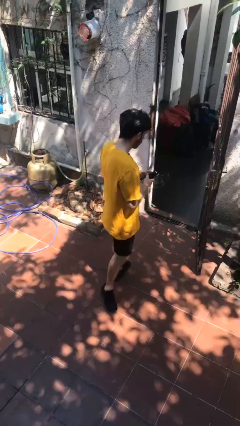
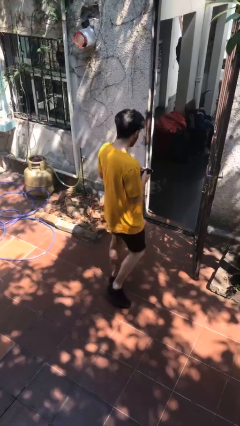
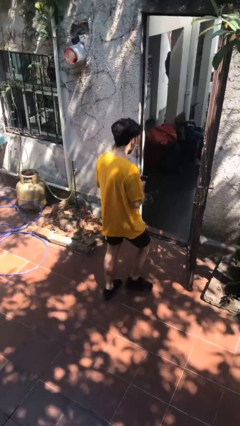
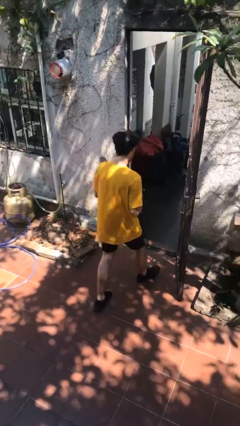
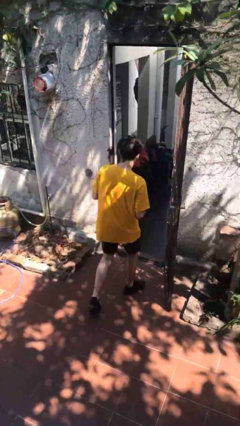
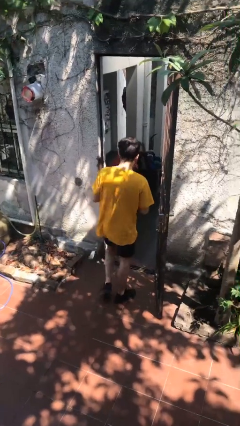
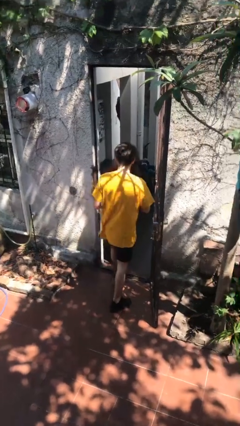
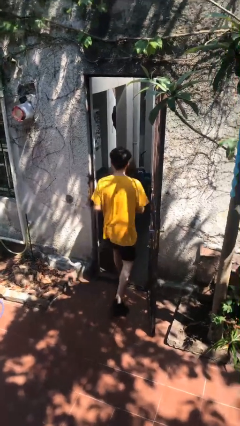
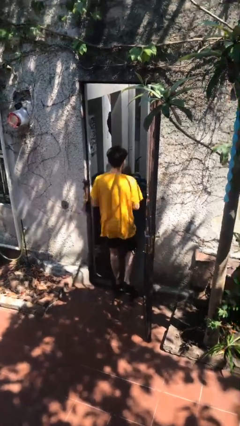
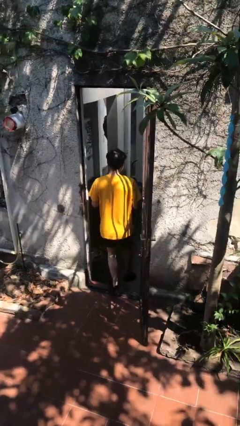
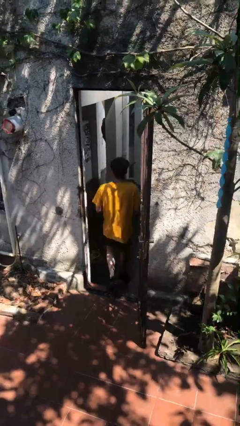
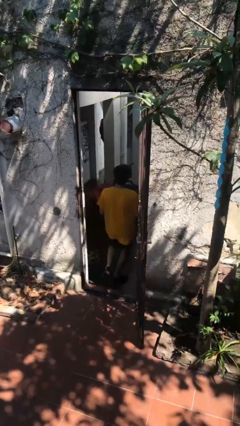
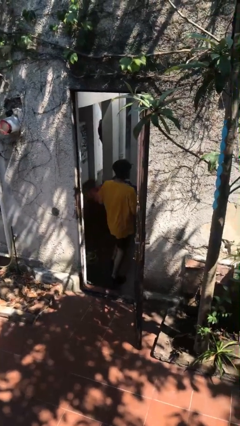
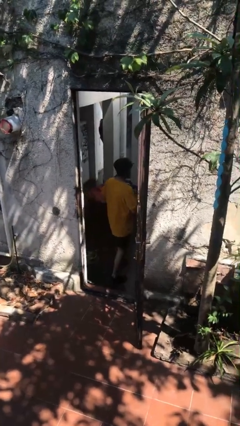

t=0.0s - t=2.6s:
person exits scene through structure

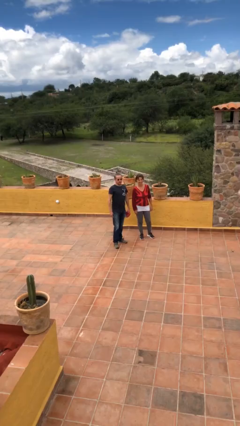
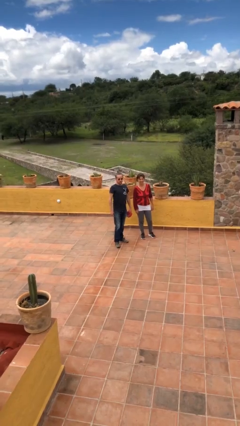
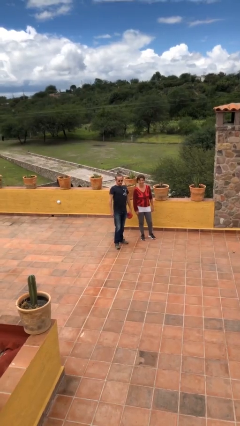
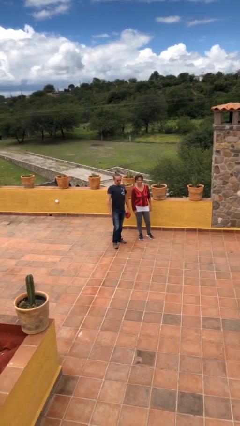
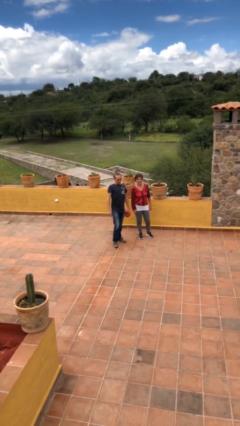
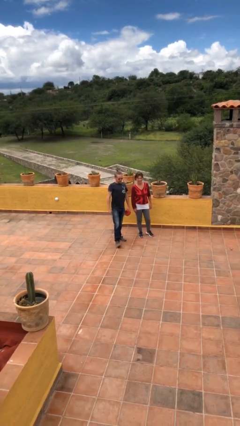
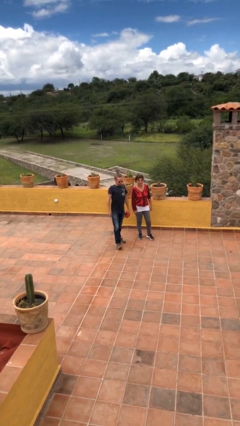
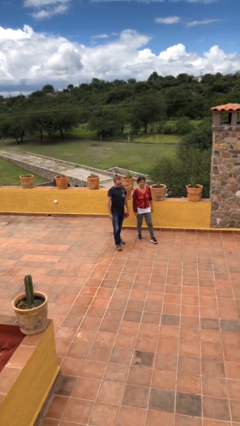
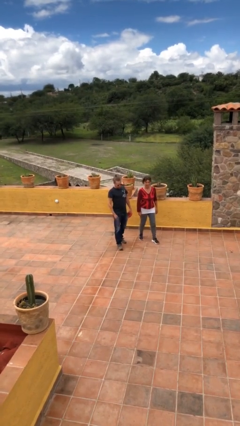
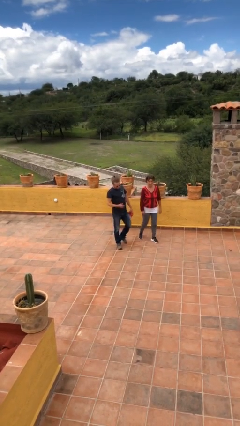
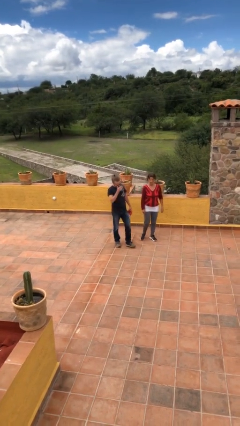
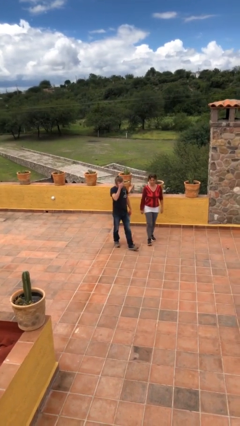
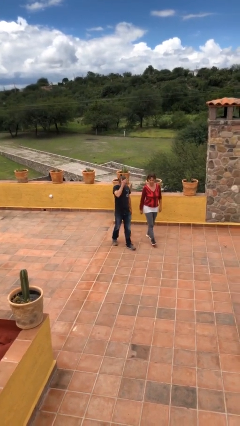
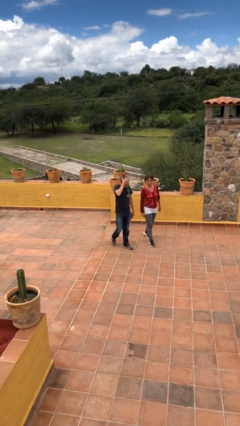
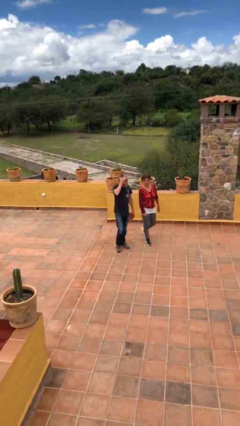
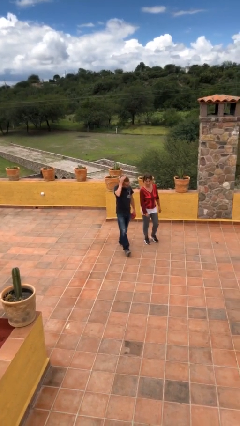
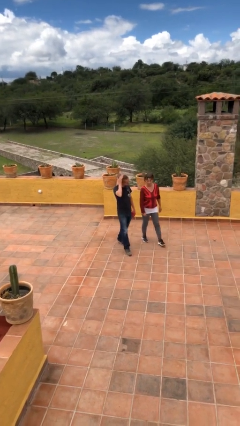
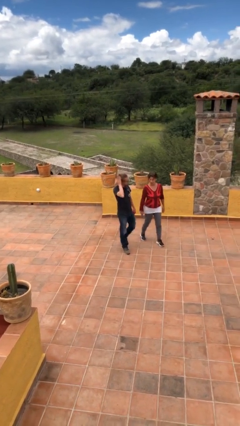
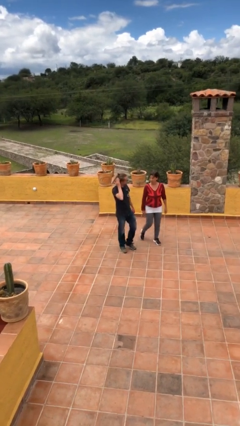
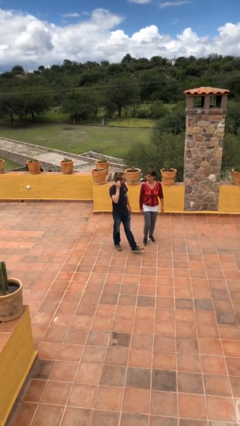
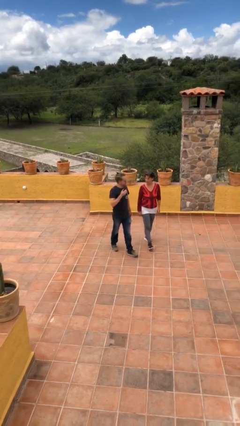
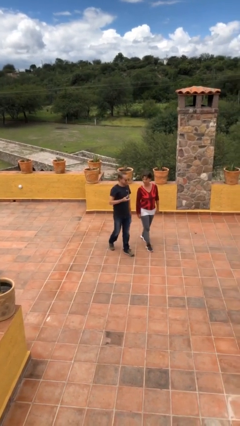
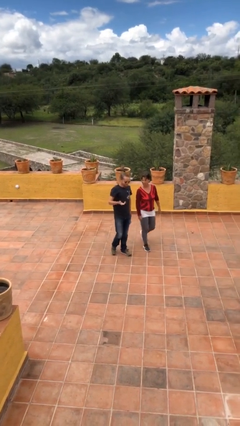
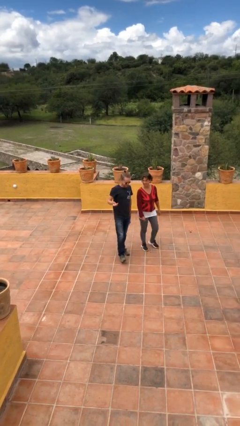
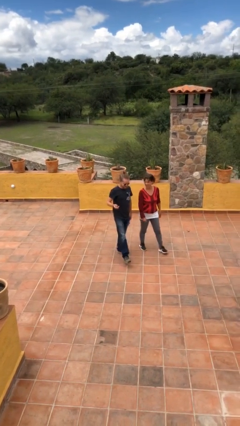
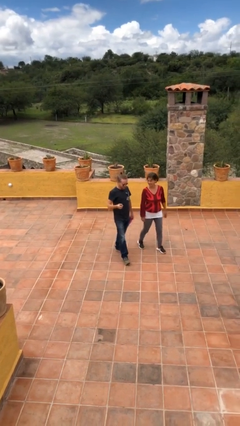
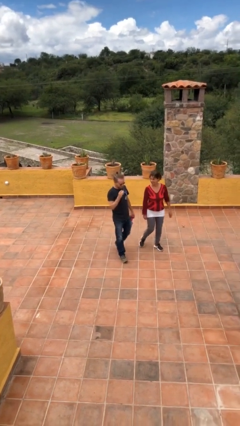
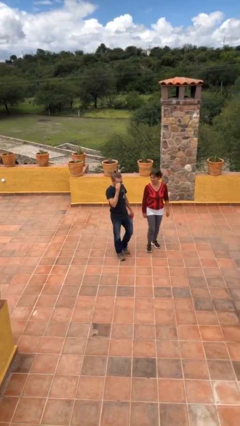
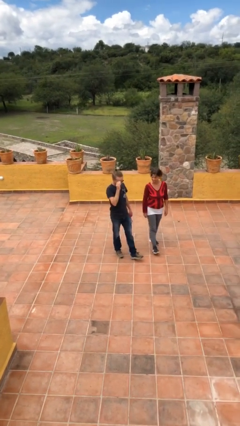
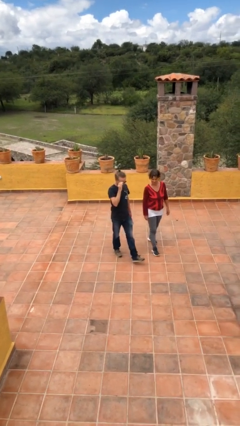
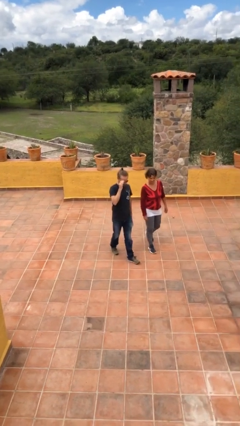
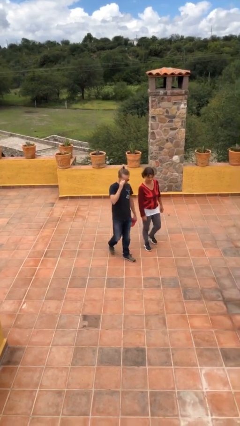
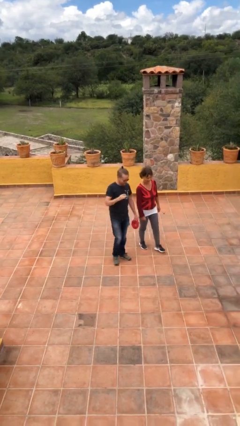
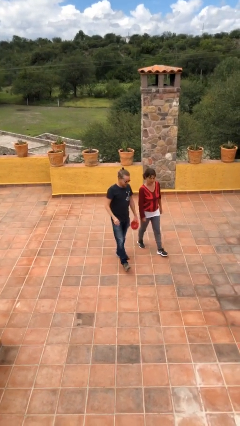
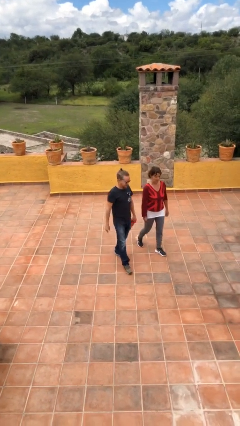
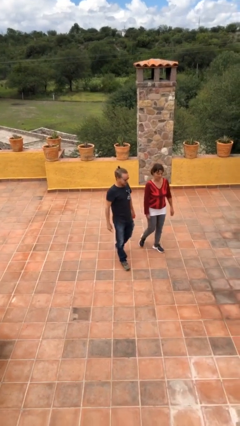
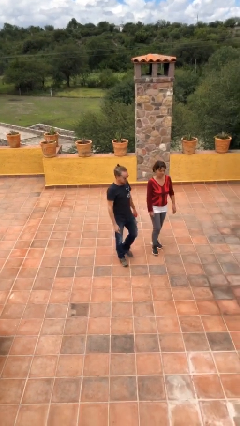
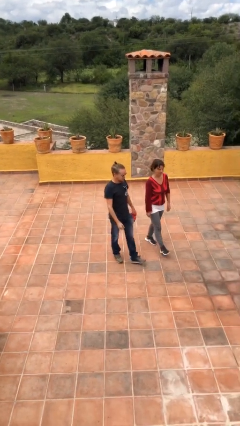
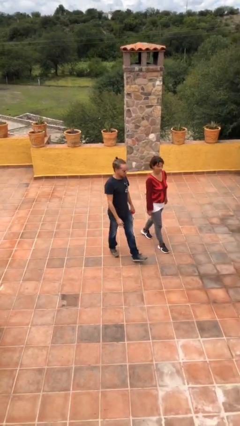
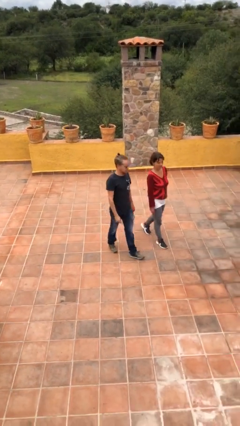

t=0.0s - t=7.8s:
person talks to person

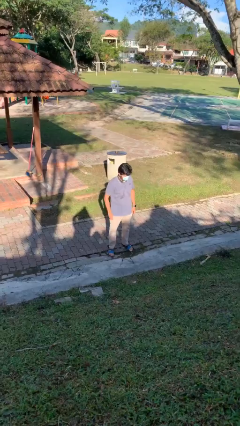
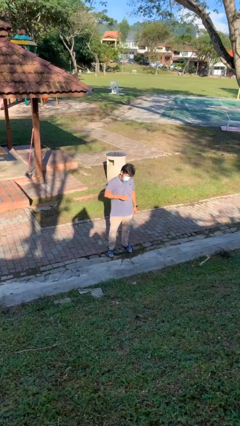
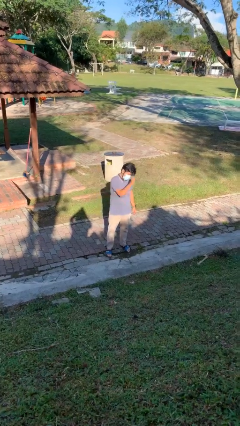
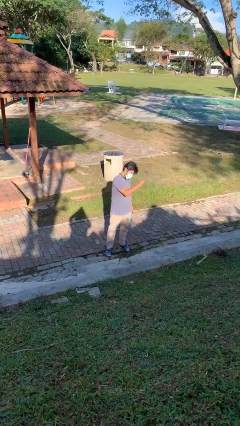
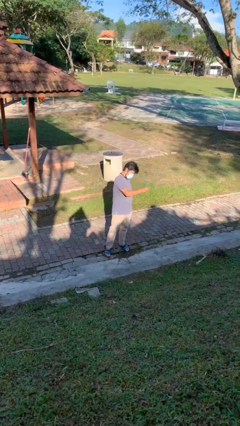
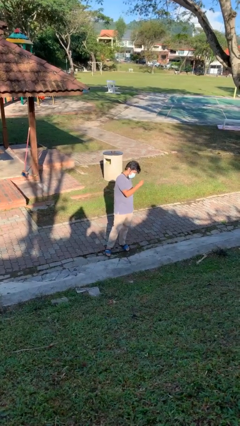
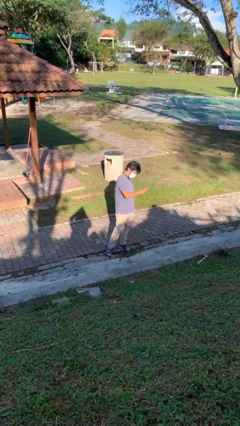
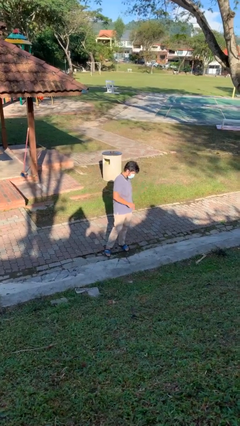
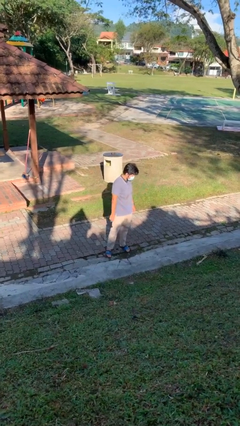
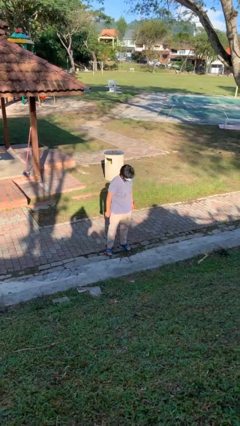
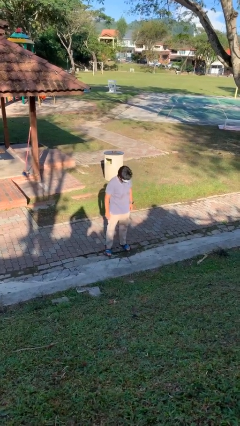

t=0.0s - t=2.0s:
person snaps fingers

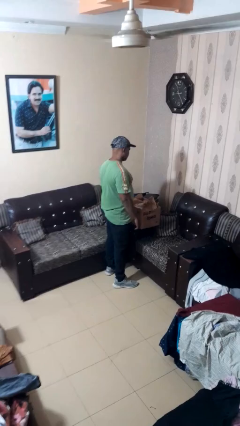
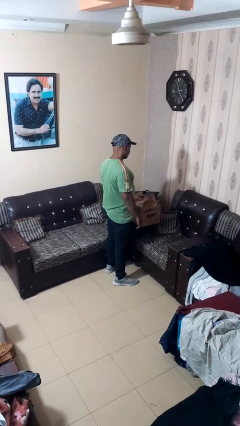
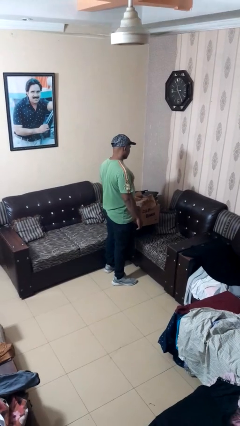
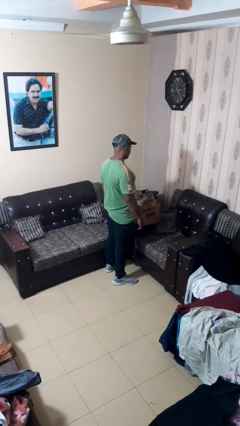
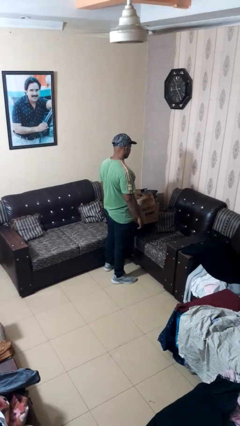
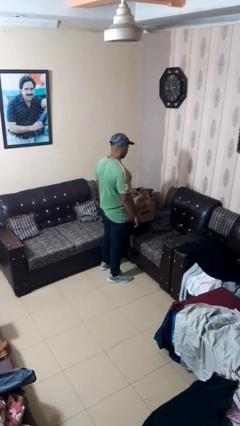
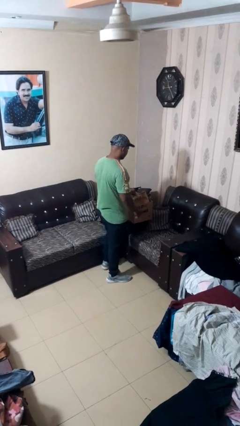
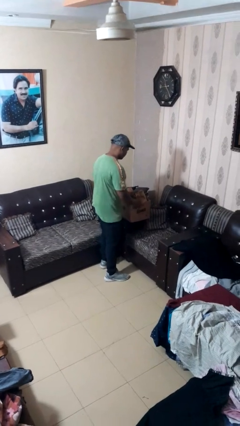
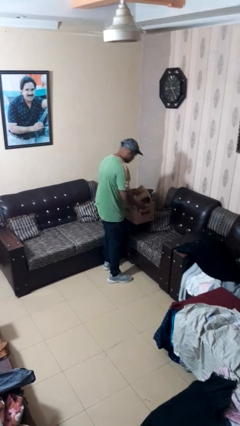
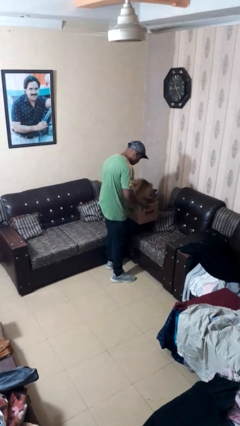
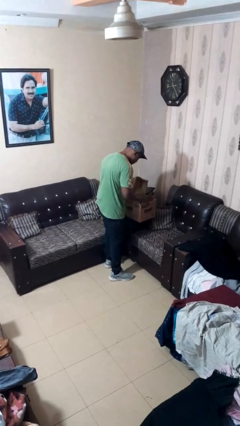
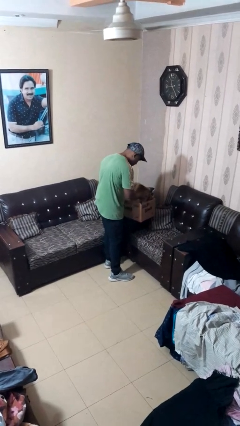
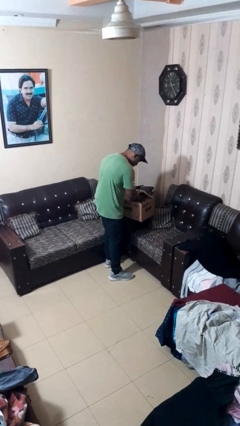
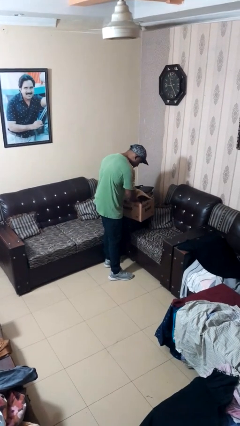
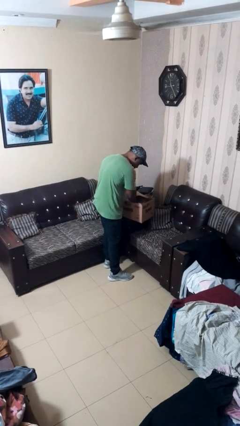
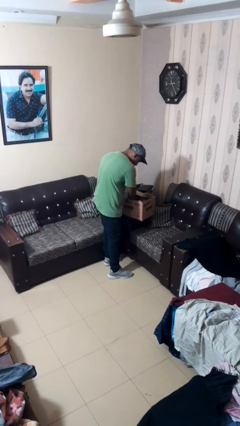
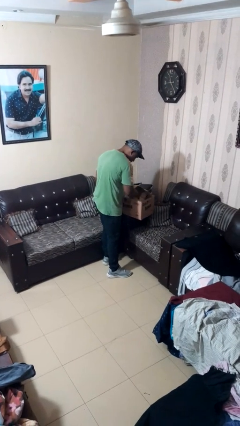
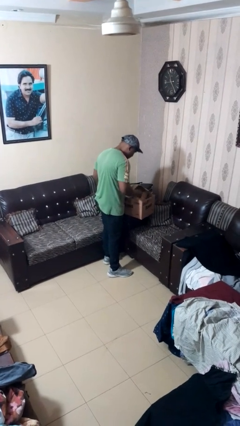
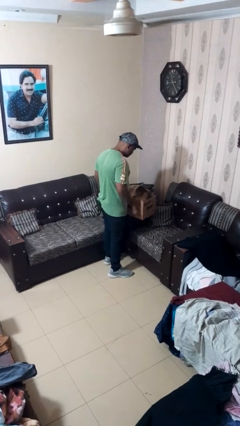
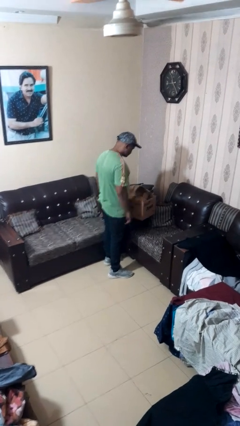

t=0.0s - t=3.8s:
person searches in box

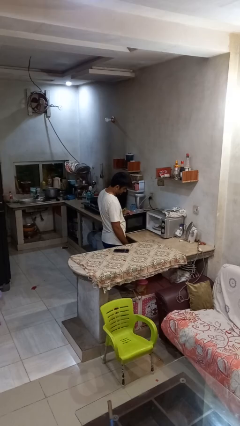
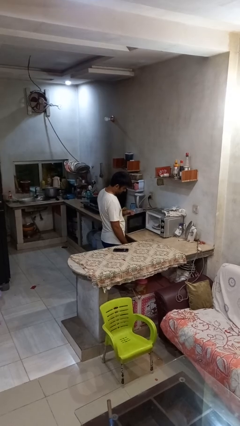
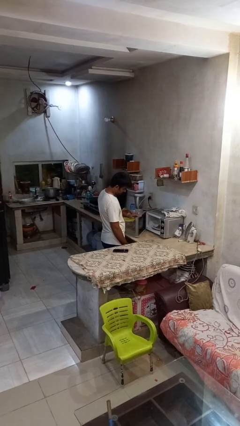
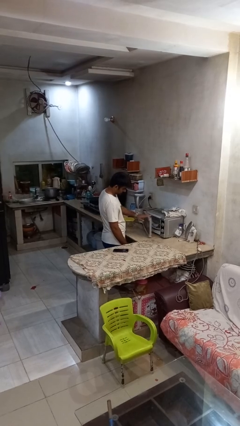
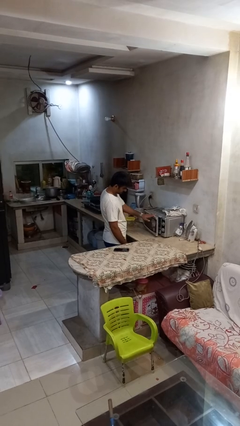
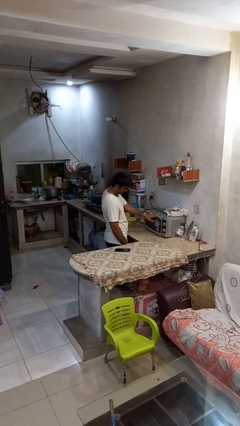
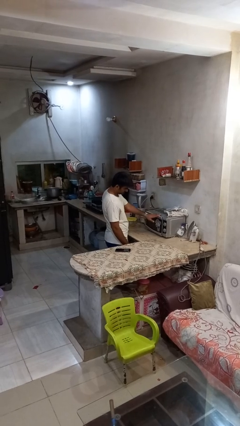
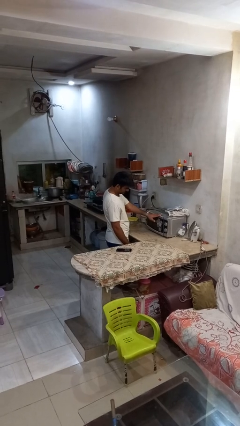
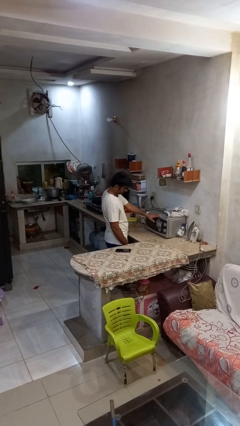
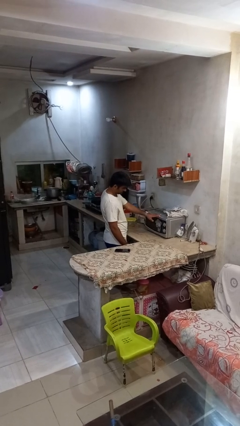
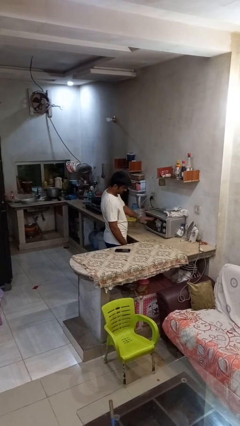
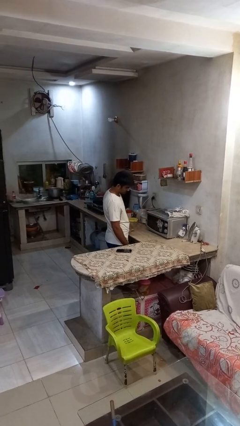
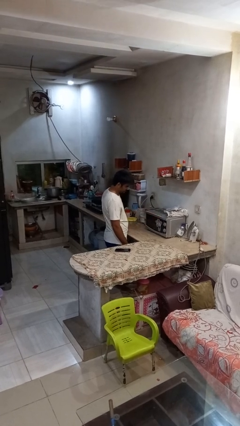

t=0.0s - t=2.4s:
person closes microwave
